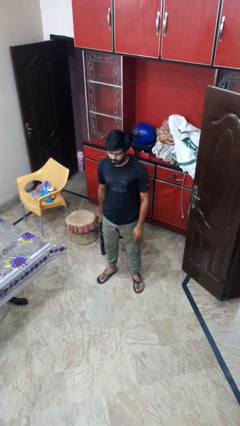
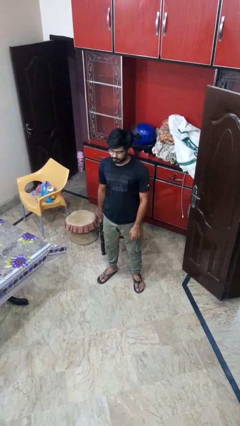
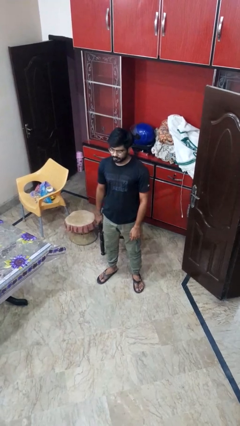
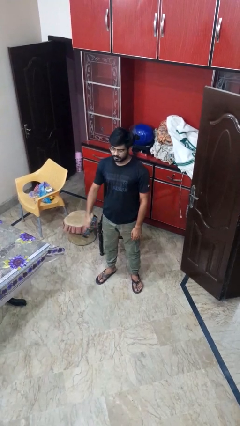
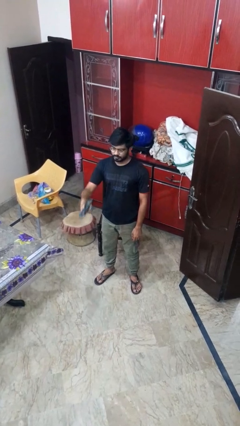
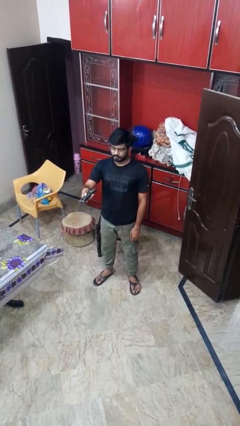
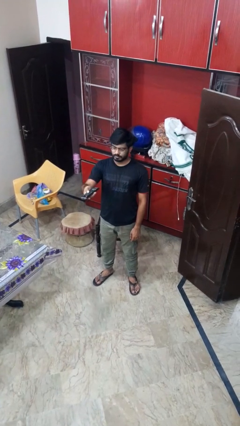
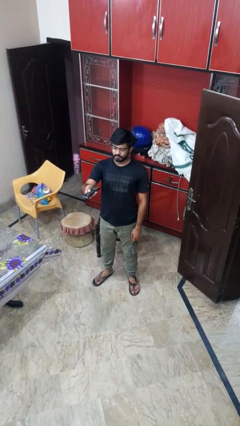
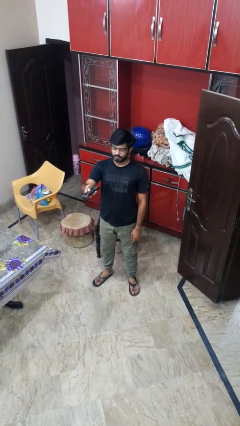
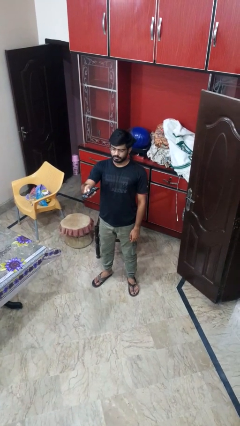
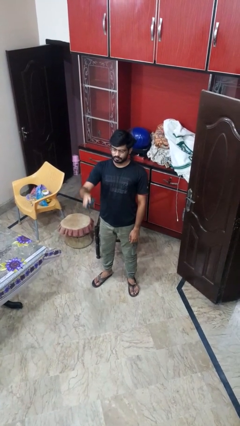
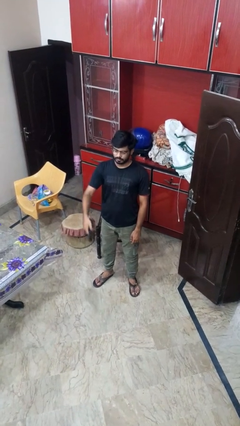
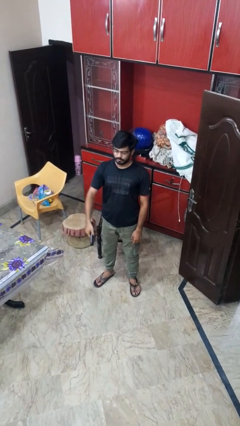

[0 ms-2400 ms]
person uses television remote

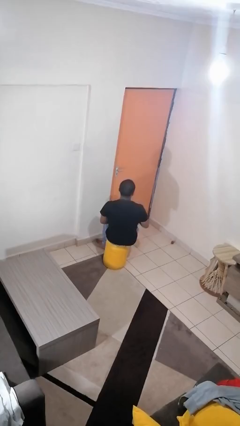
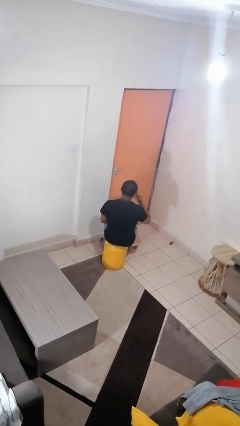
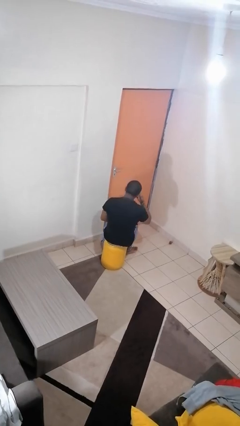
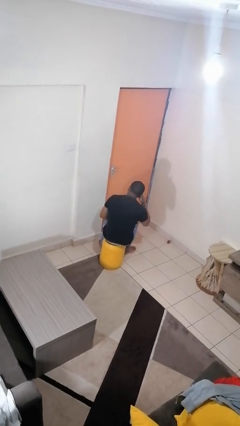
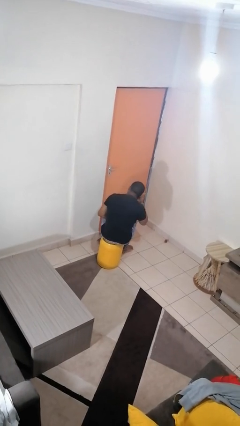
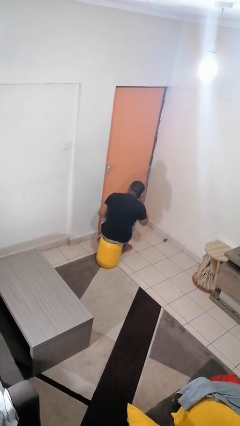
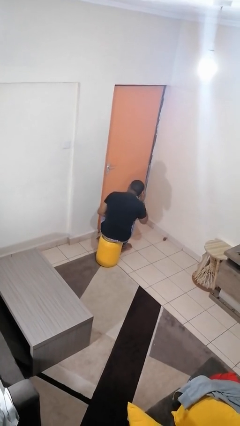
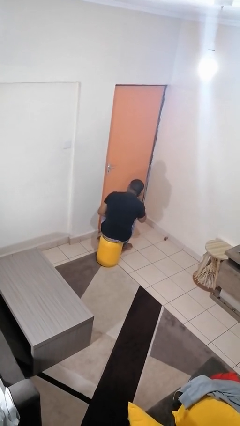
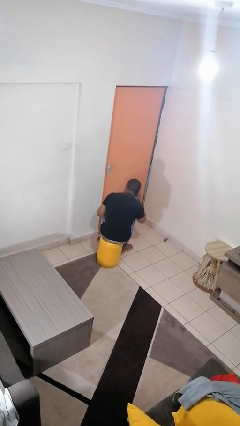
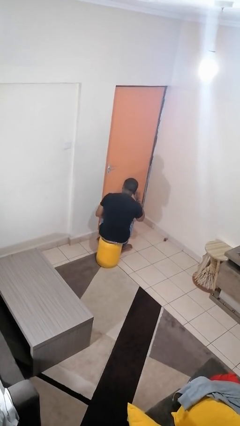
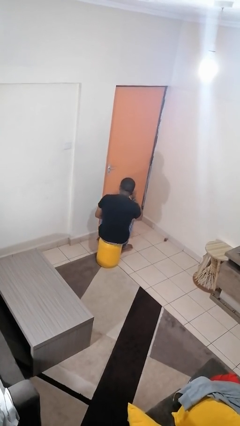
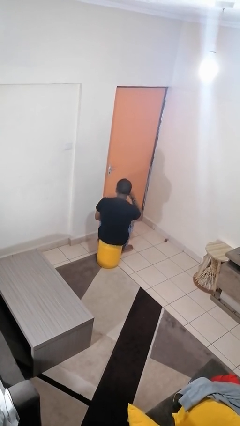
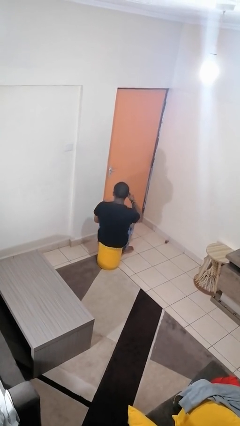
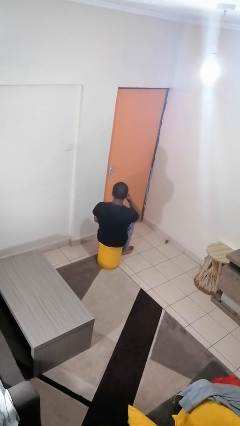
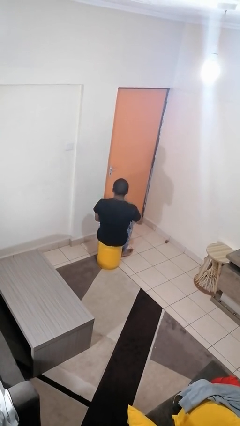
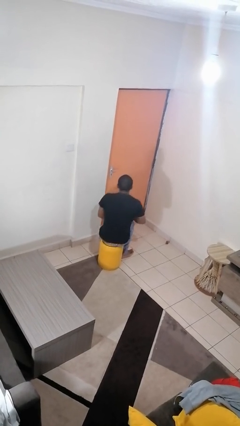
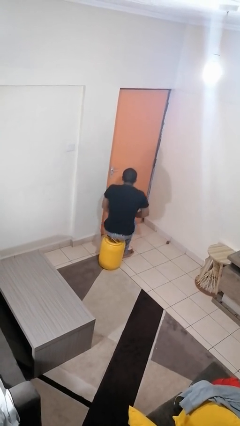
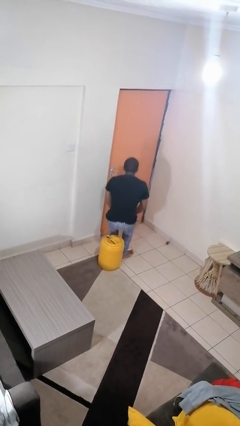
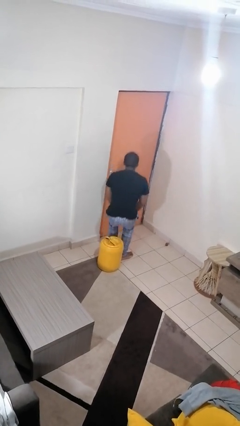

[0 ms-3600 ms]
person rubs eyes

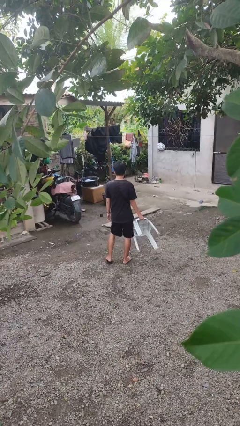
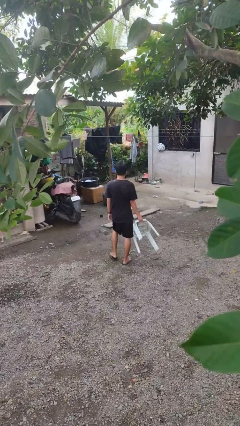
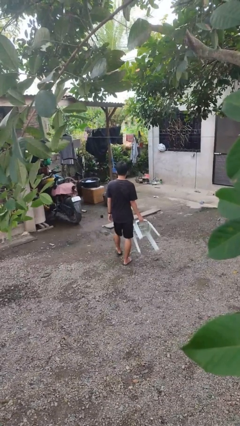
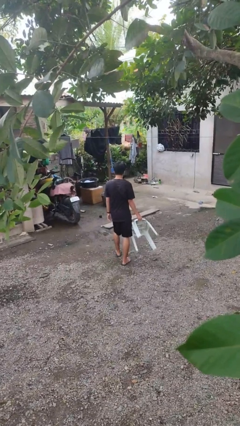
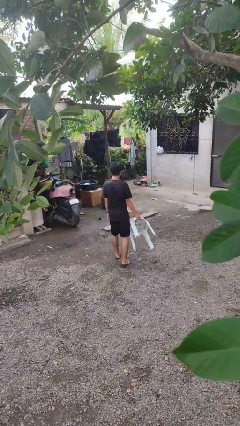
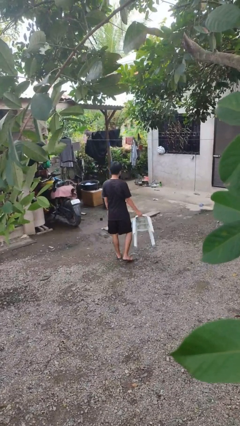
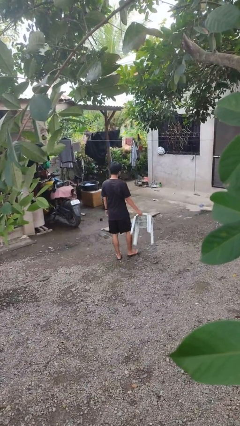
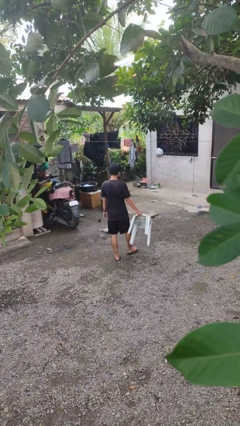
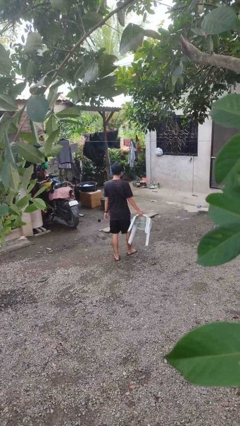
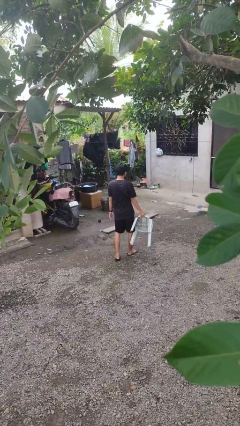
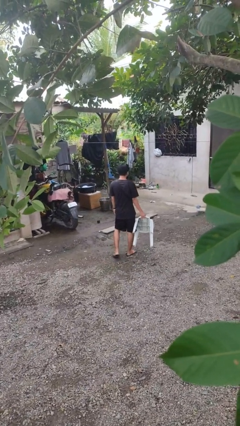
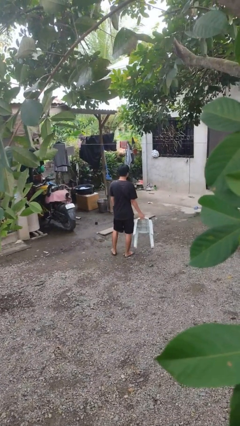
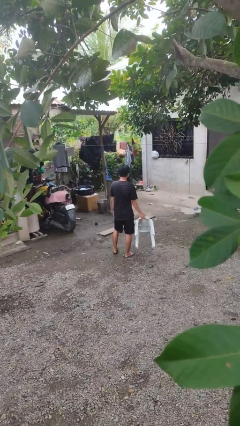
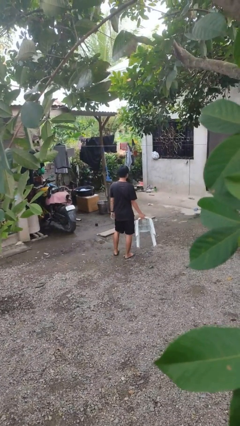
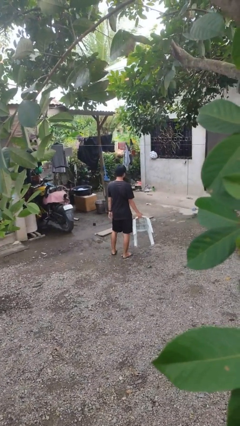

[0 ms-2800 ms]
person carries furniture

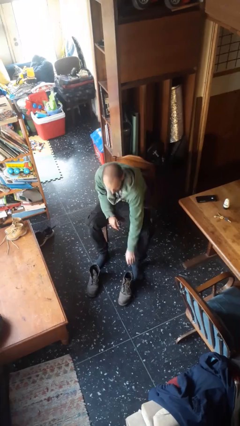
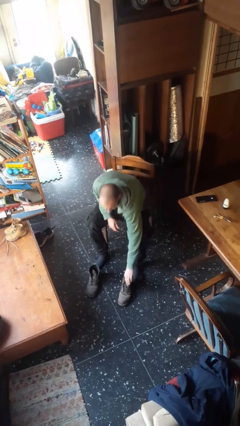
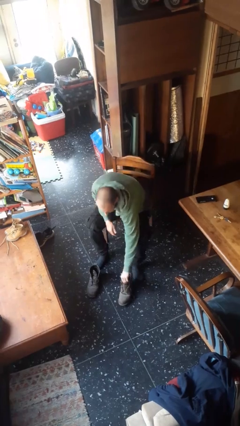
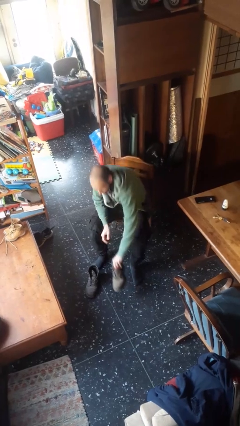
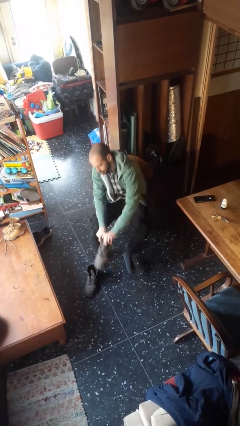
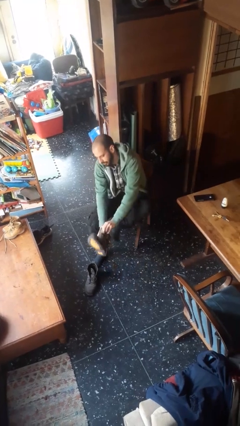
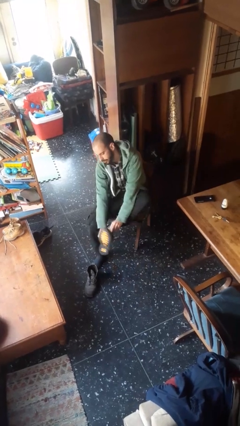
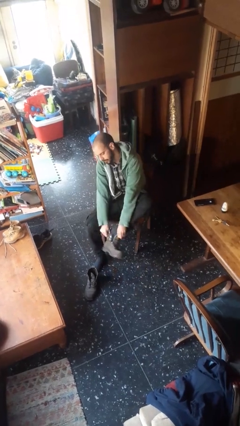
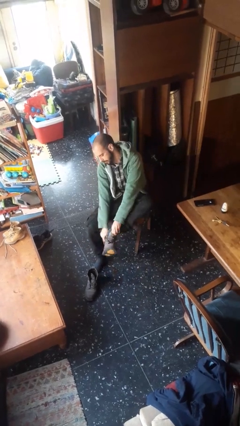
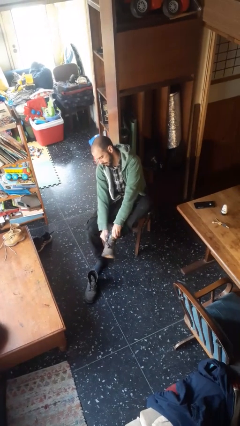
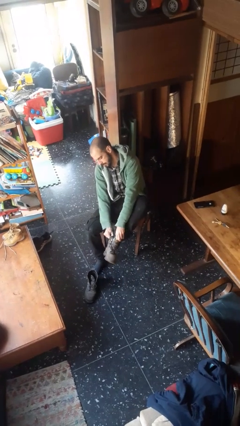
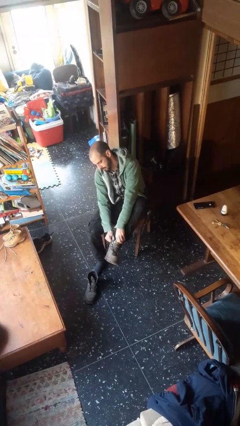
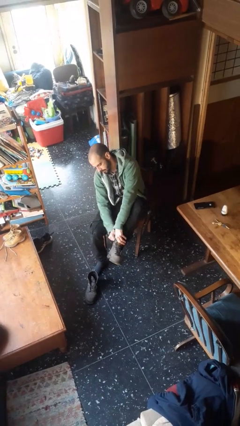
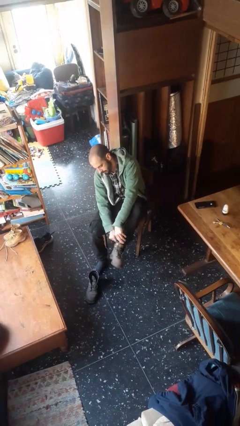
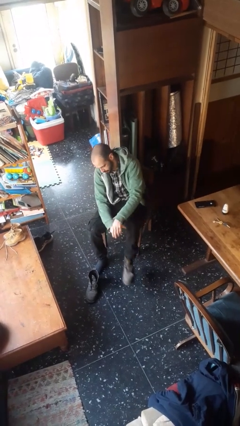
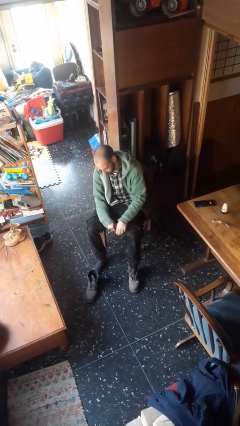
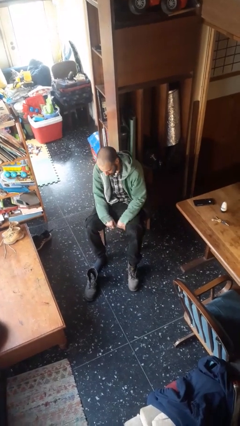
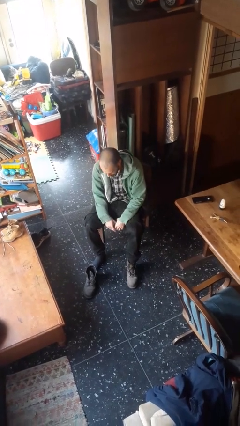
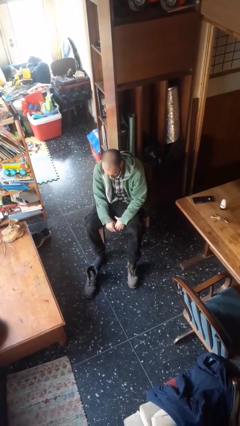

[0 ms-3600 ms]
person puts on boots

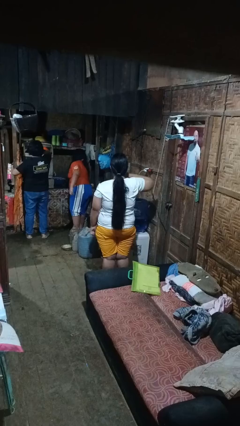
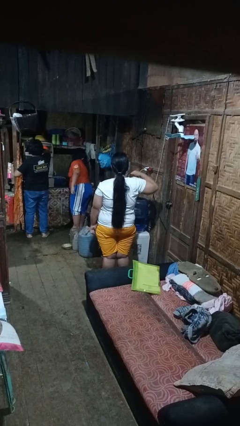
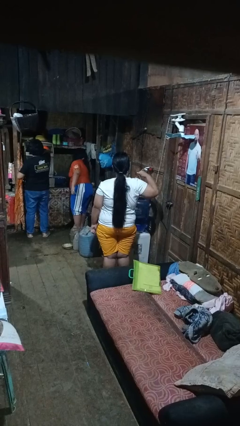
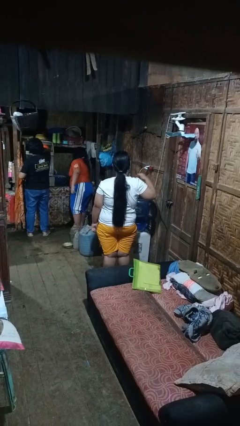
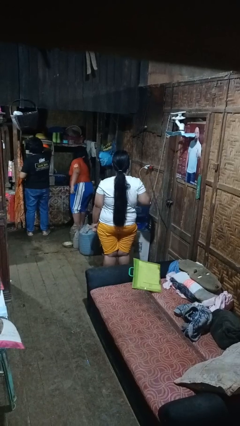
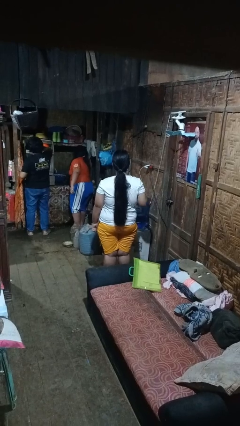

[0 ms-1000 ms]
person gestures cut

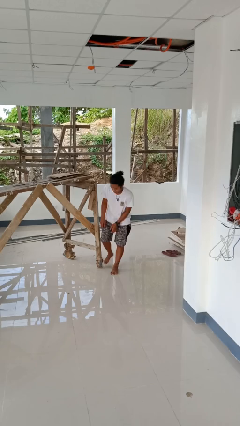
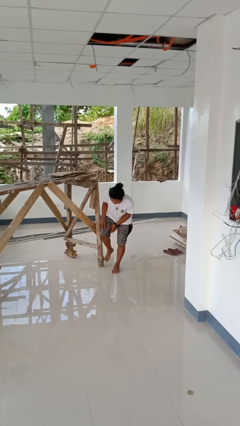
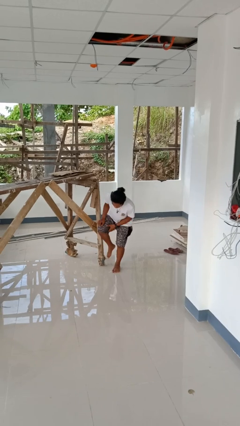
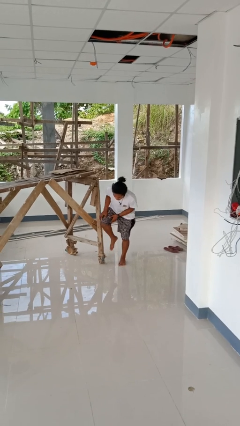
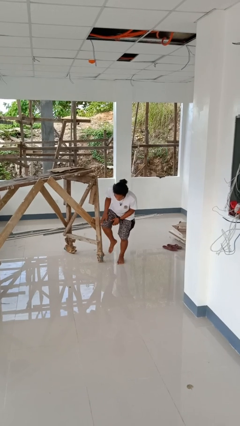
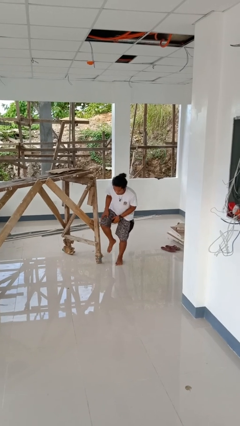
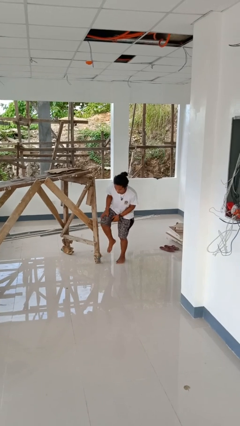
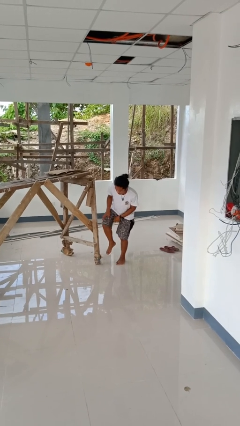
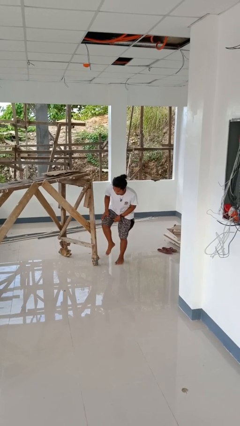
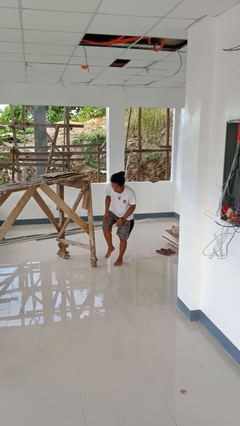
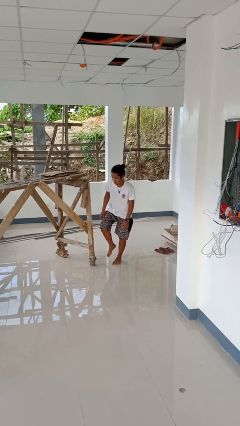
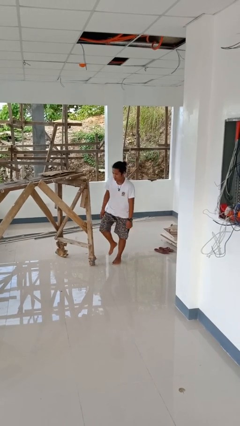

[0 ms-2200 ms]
person stubs toe

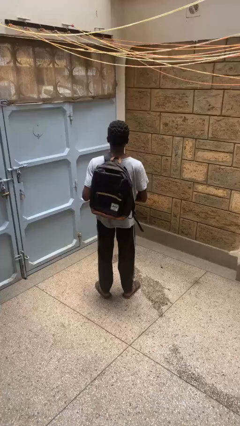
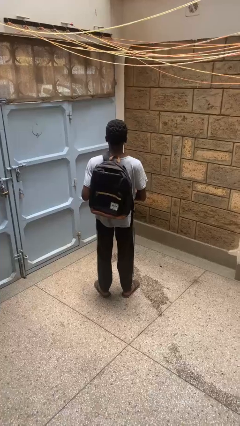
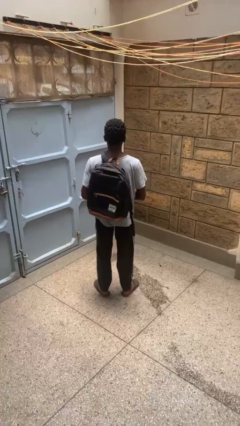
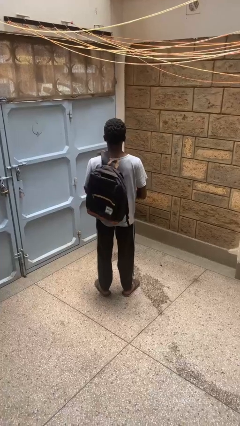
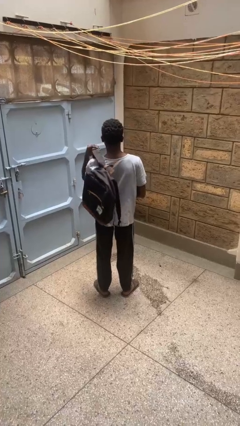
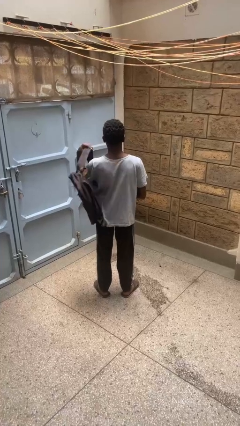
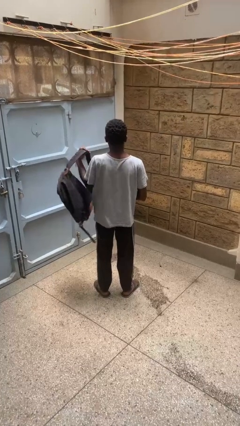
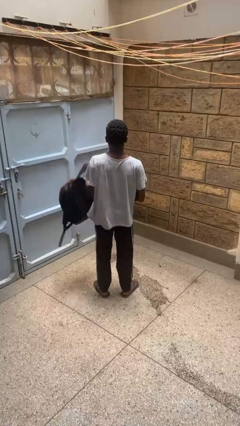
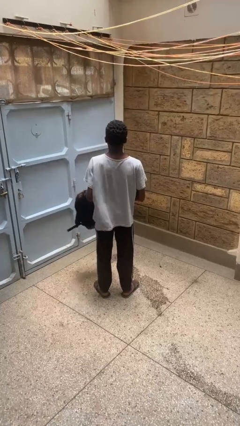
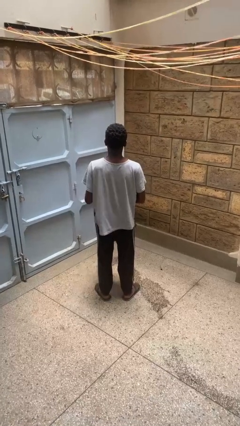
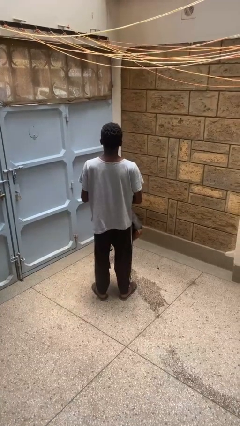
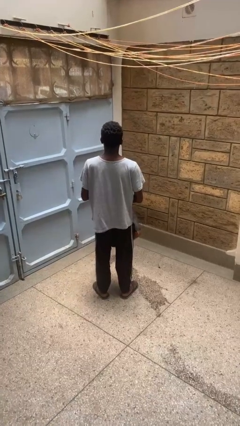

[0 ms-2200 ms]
person takes off backpack
